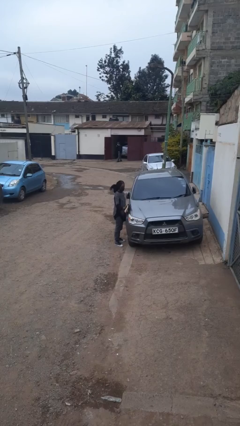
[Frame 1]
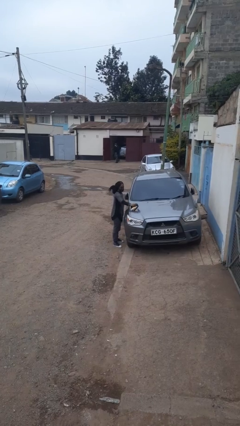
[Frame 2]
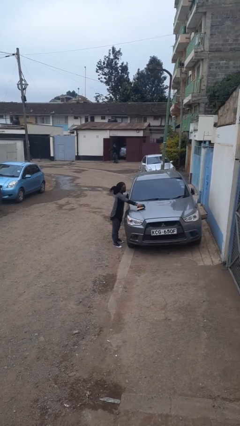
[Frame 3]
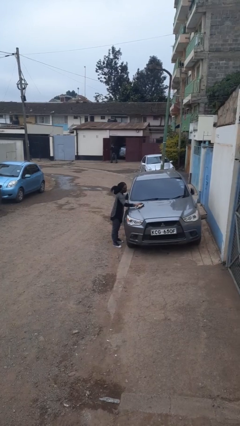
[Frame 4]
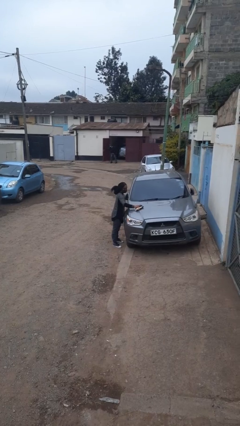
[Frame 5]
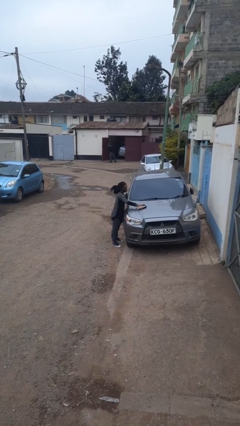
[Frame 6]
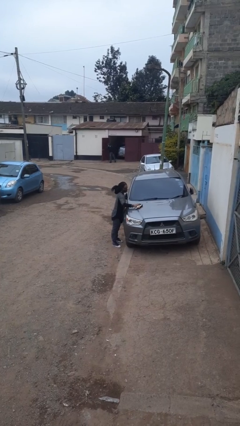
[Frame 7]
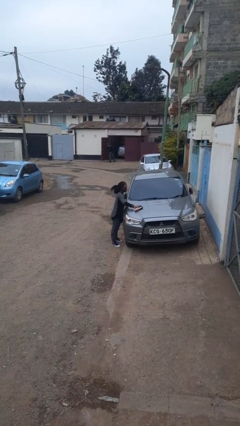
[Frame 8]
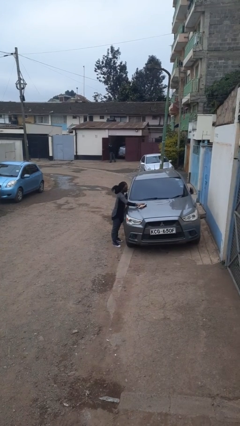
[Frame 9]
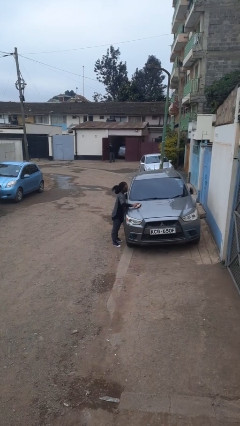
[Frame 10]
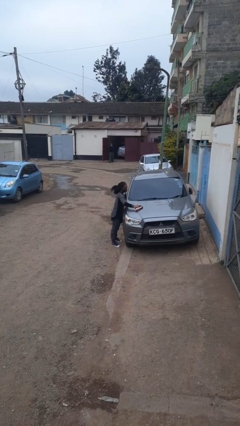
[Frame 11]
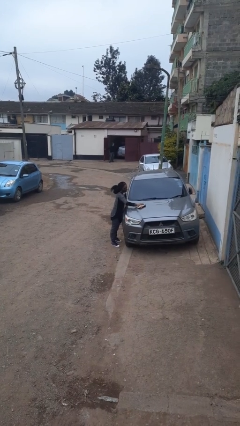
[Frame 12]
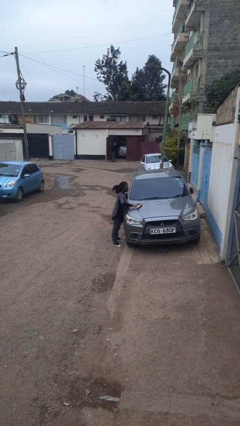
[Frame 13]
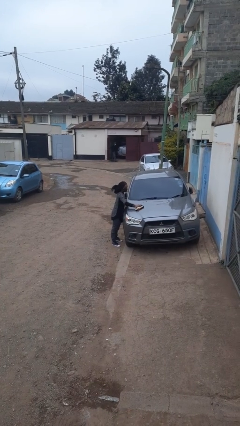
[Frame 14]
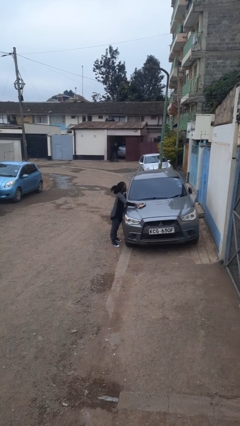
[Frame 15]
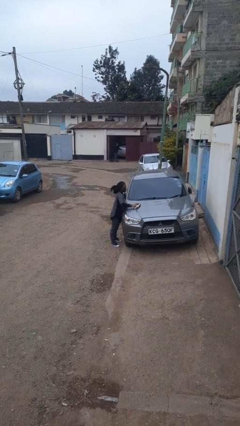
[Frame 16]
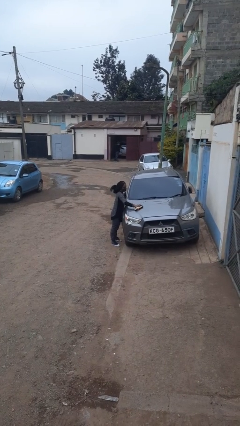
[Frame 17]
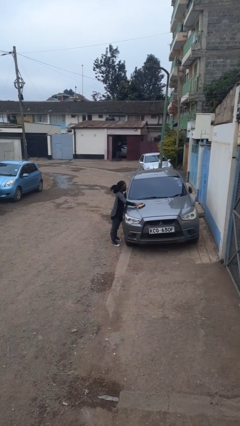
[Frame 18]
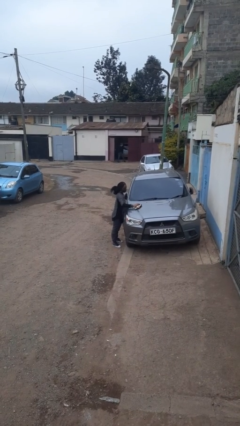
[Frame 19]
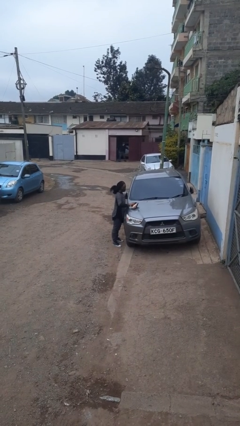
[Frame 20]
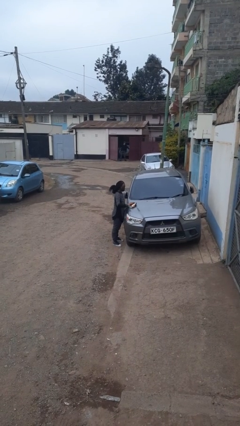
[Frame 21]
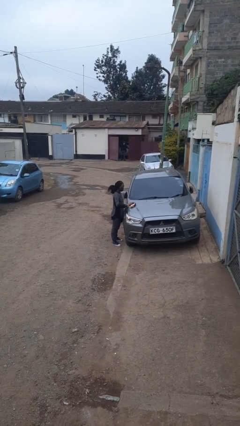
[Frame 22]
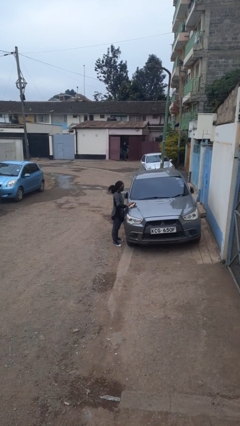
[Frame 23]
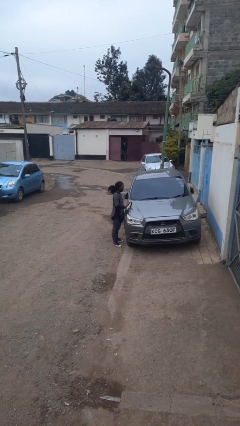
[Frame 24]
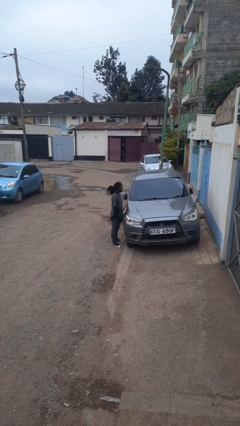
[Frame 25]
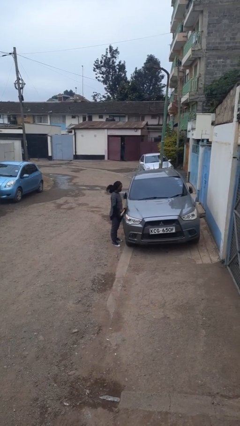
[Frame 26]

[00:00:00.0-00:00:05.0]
person polishes car with rag

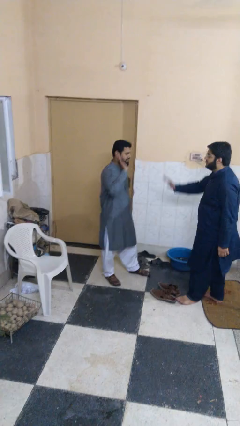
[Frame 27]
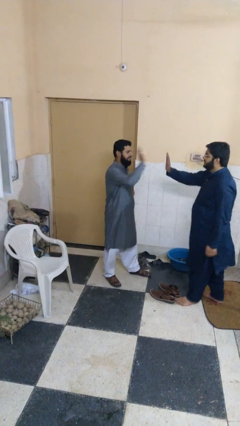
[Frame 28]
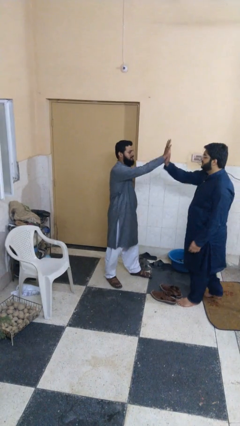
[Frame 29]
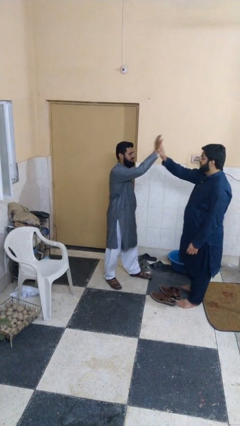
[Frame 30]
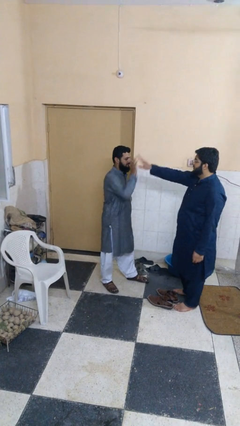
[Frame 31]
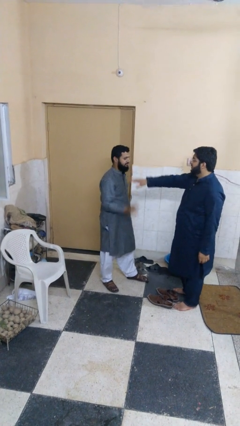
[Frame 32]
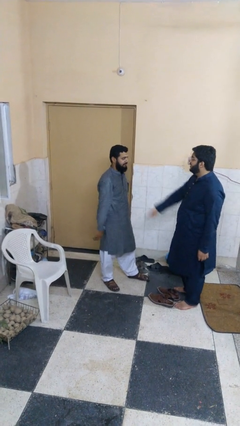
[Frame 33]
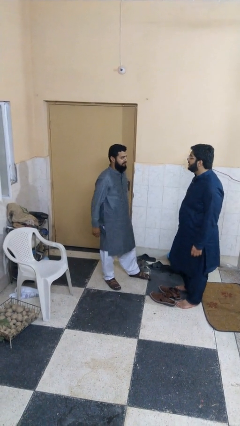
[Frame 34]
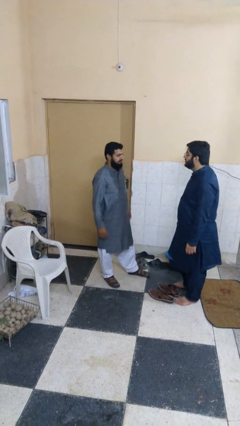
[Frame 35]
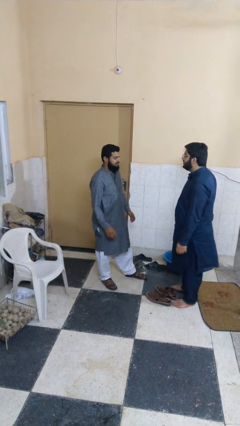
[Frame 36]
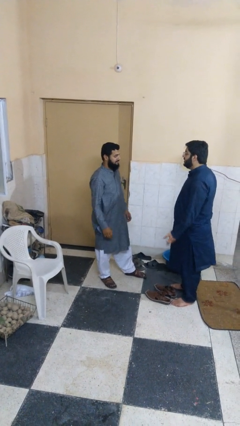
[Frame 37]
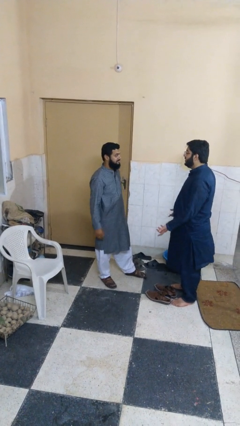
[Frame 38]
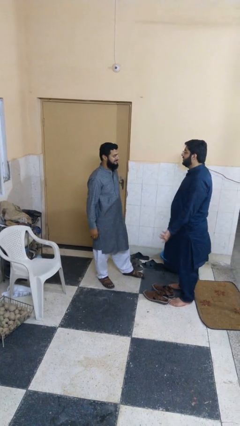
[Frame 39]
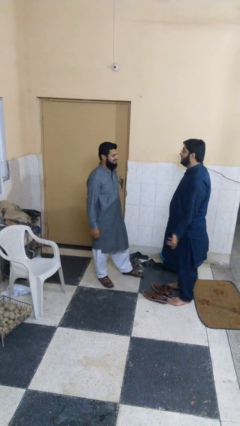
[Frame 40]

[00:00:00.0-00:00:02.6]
person highfives hand

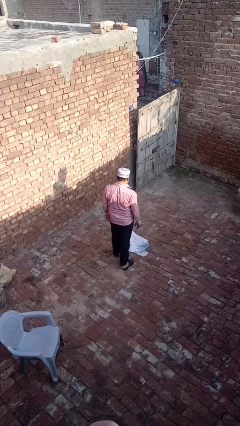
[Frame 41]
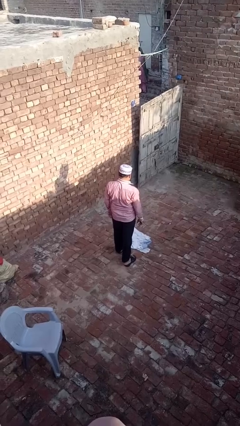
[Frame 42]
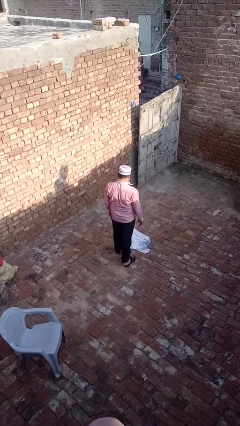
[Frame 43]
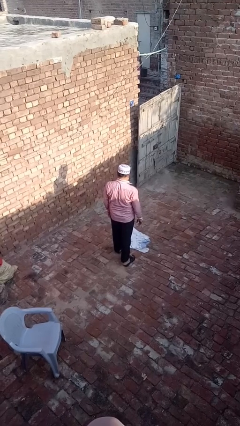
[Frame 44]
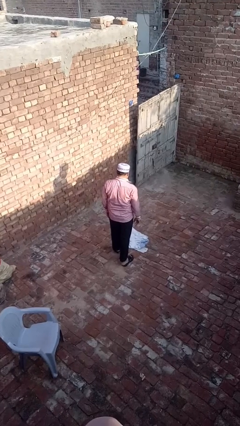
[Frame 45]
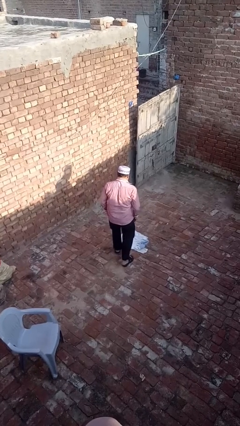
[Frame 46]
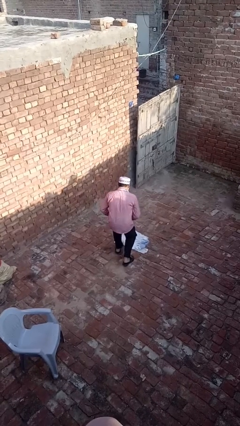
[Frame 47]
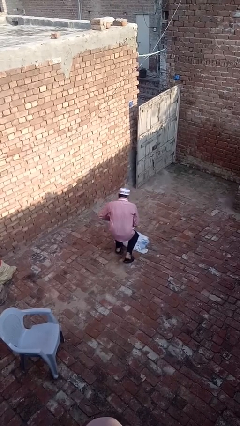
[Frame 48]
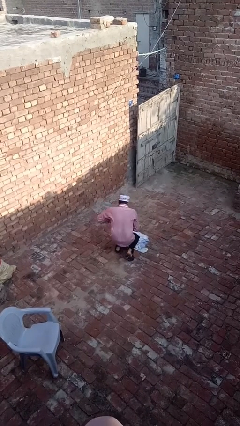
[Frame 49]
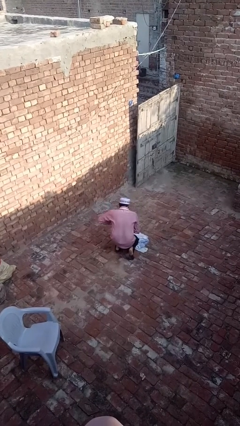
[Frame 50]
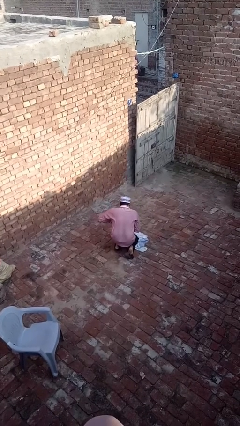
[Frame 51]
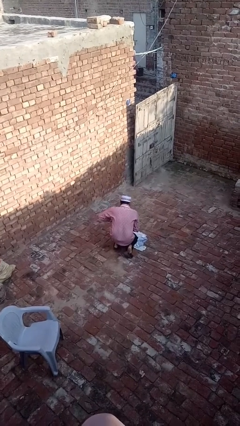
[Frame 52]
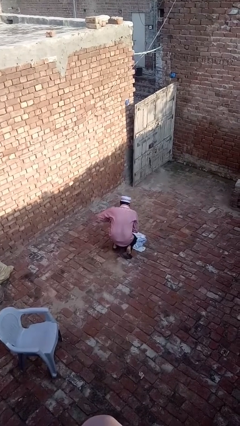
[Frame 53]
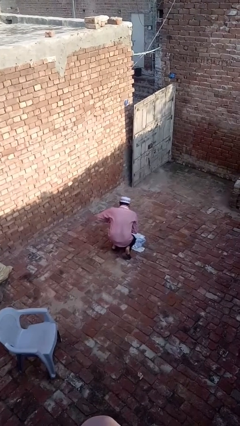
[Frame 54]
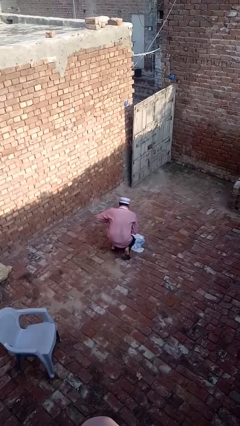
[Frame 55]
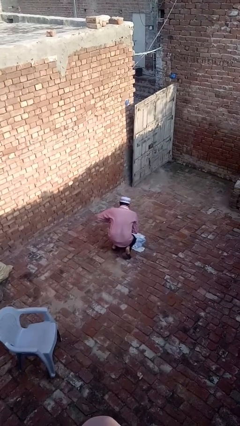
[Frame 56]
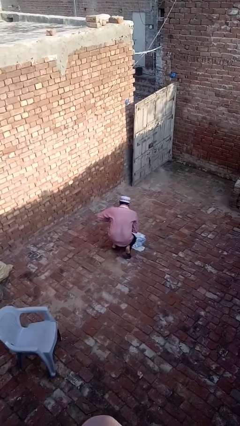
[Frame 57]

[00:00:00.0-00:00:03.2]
person kneels

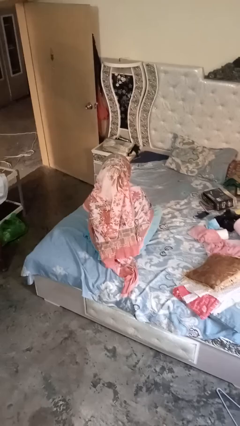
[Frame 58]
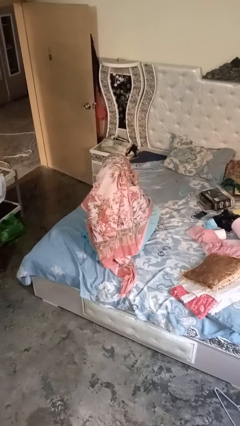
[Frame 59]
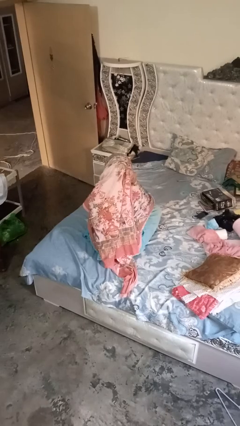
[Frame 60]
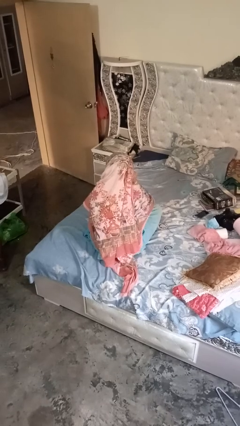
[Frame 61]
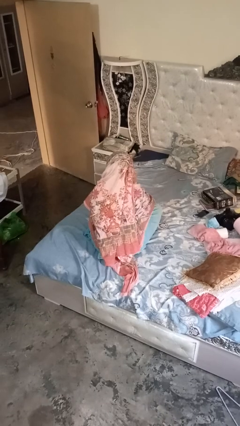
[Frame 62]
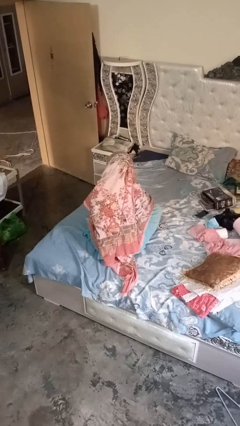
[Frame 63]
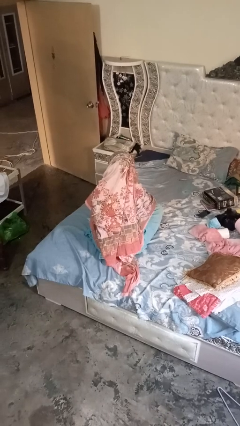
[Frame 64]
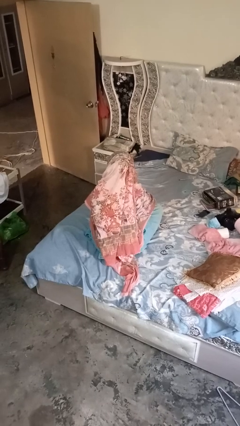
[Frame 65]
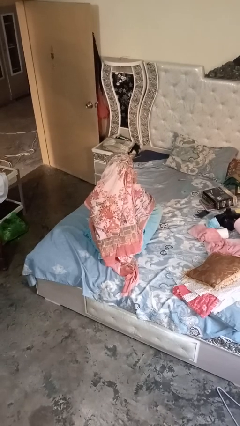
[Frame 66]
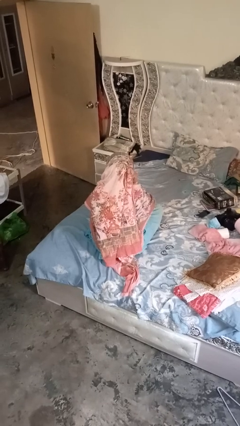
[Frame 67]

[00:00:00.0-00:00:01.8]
person gestures listen closely

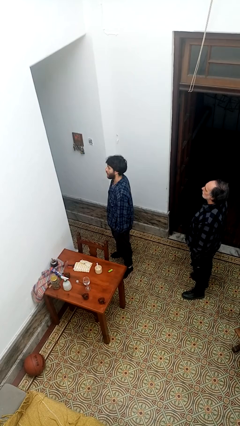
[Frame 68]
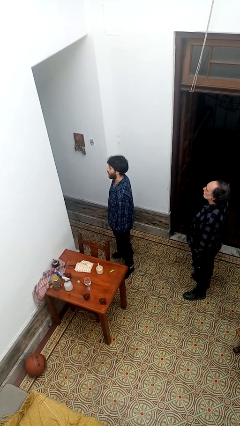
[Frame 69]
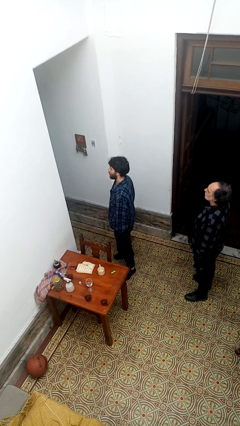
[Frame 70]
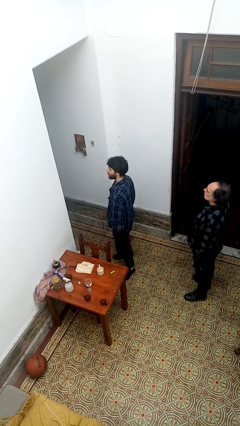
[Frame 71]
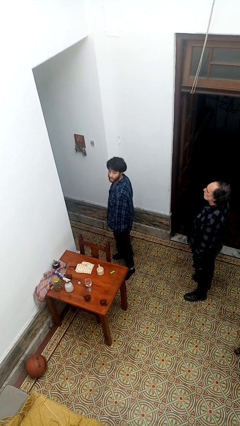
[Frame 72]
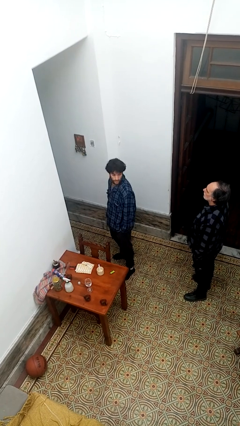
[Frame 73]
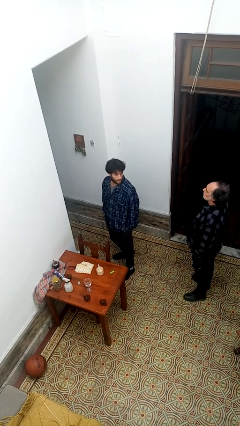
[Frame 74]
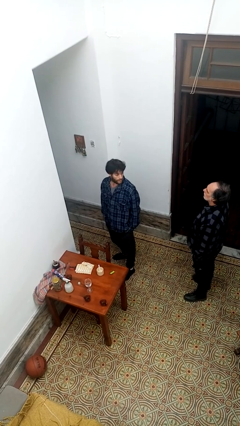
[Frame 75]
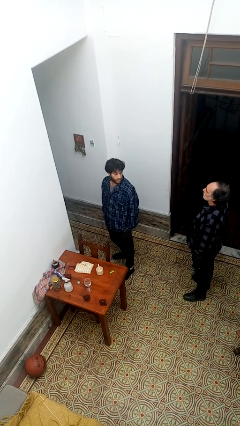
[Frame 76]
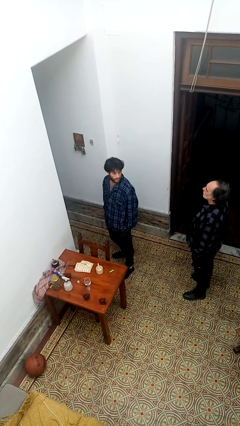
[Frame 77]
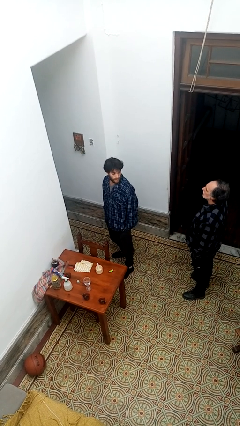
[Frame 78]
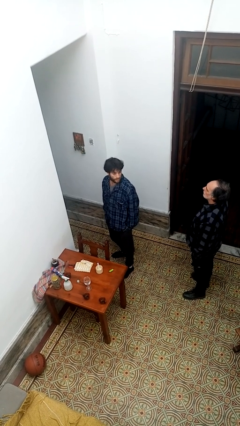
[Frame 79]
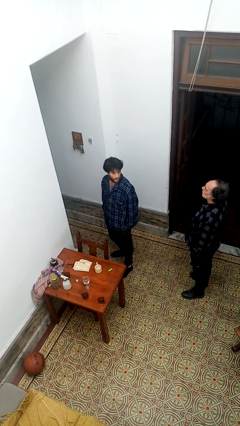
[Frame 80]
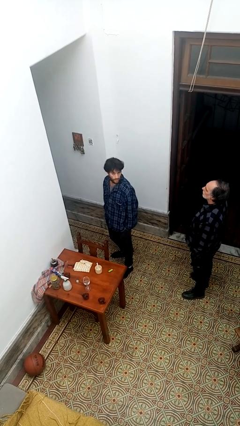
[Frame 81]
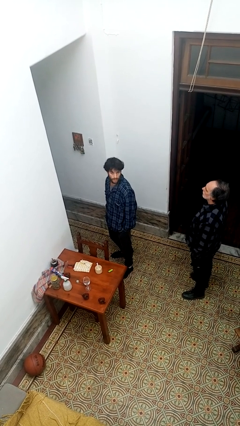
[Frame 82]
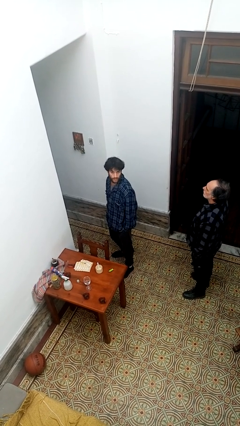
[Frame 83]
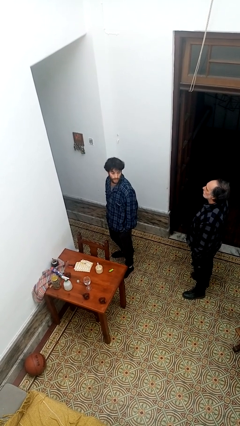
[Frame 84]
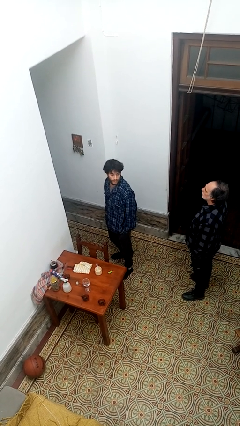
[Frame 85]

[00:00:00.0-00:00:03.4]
person looks over shoulder

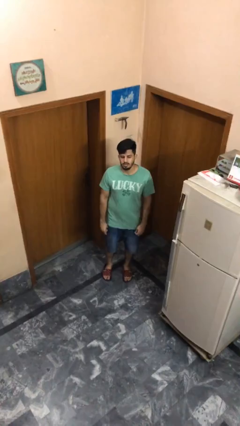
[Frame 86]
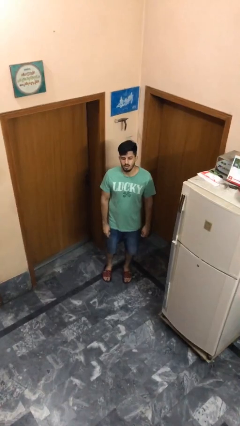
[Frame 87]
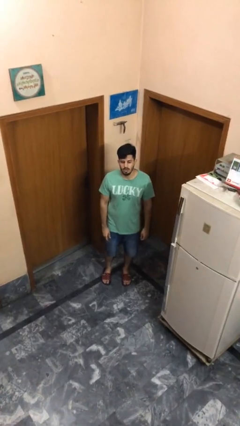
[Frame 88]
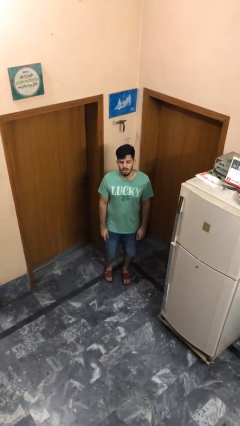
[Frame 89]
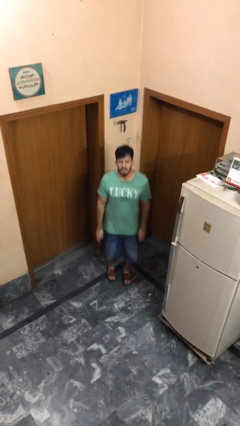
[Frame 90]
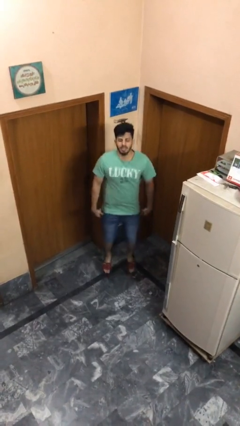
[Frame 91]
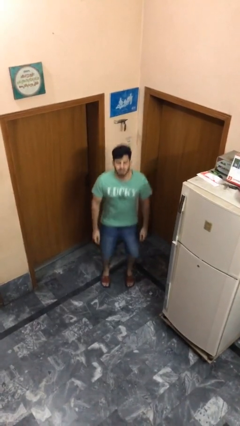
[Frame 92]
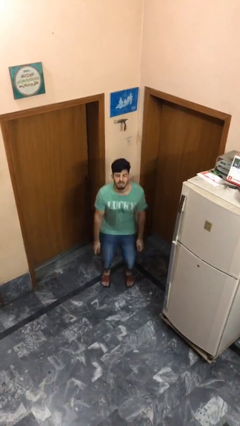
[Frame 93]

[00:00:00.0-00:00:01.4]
person jumps
